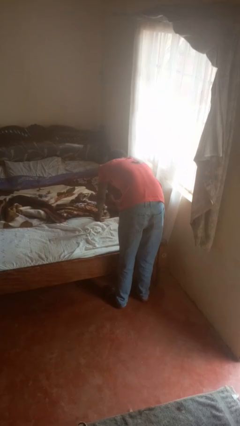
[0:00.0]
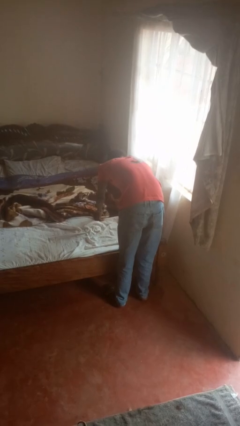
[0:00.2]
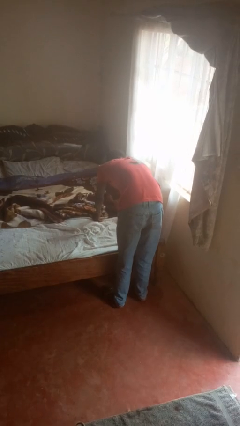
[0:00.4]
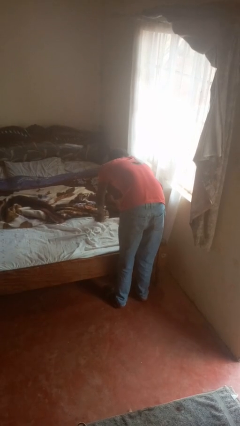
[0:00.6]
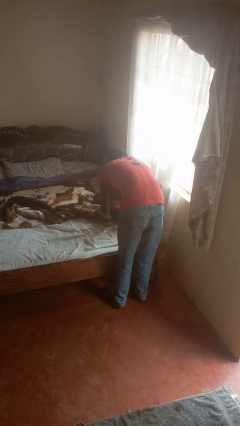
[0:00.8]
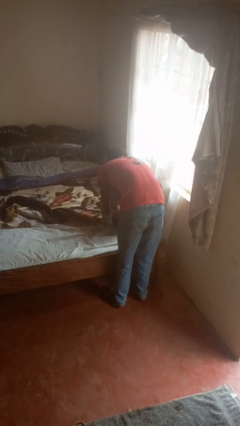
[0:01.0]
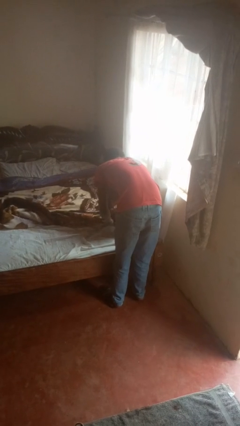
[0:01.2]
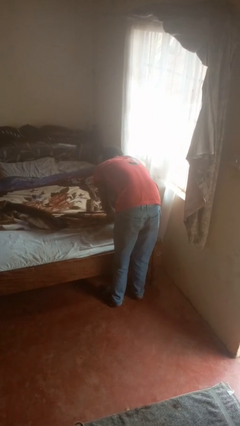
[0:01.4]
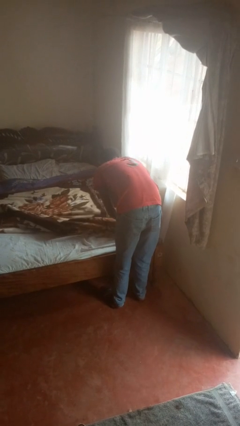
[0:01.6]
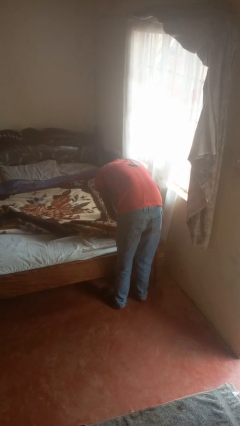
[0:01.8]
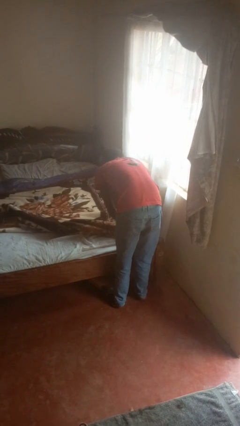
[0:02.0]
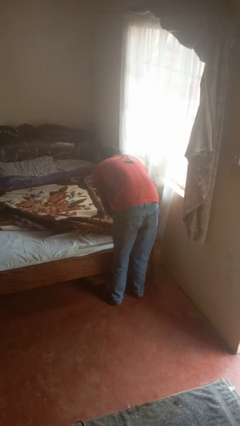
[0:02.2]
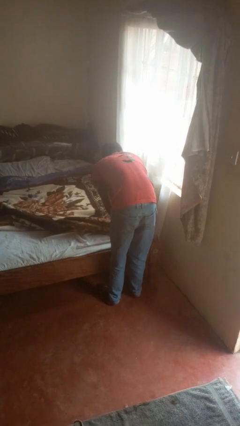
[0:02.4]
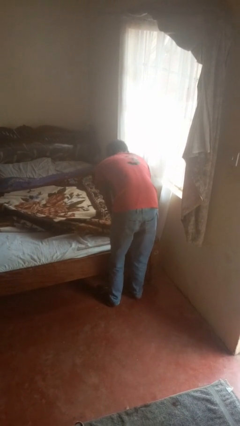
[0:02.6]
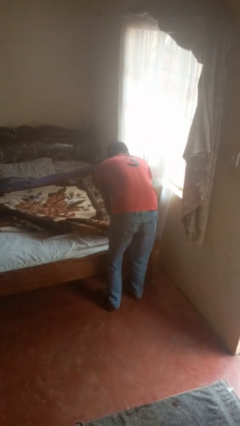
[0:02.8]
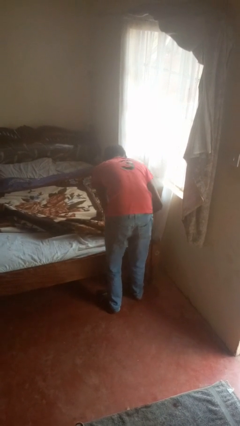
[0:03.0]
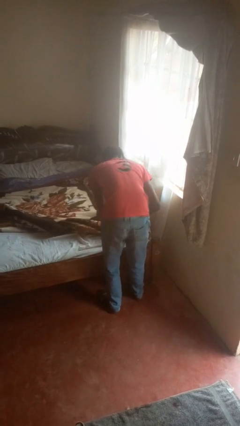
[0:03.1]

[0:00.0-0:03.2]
person makes bed

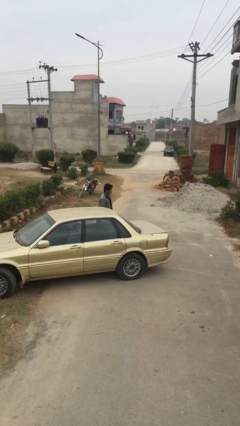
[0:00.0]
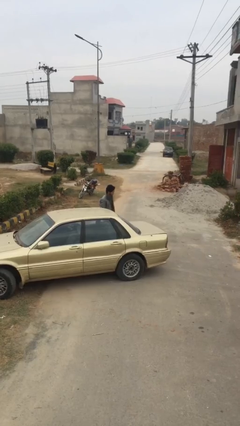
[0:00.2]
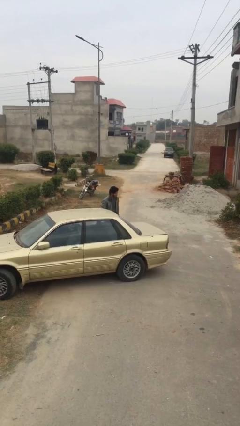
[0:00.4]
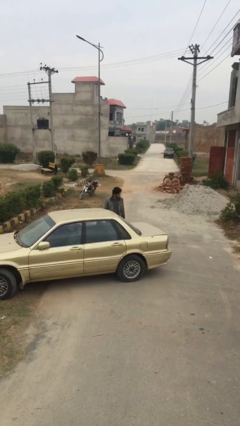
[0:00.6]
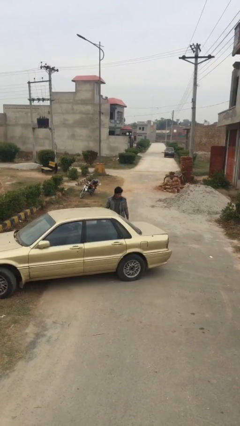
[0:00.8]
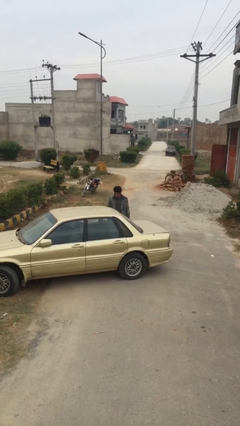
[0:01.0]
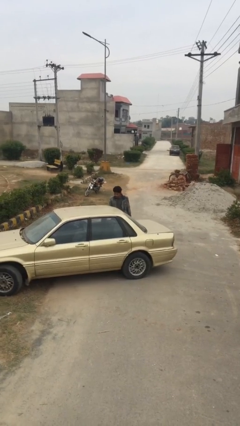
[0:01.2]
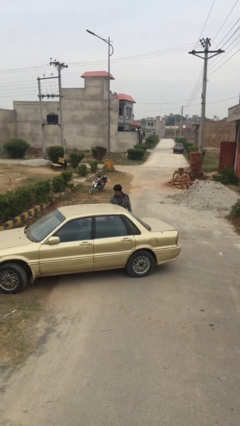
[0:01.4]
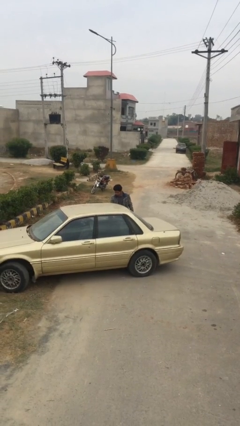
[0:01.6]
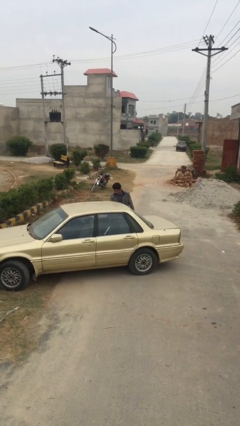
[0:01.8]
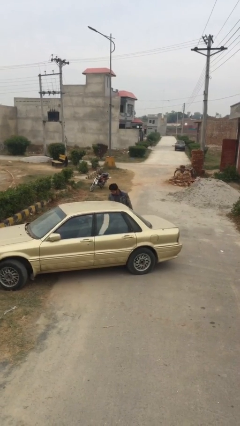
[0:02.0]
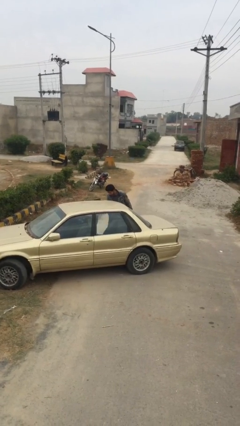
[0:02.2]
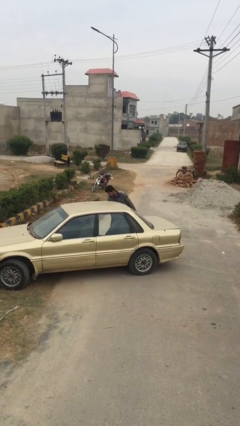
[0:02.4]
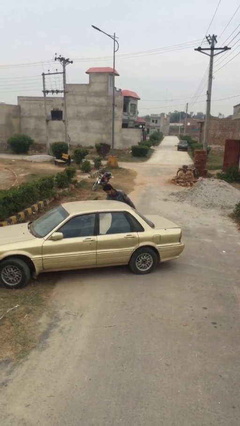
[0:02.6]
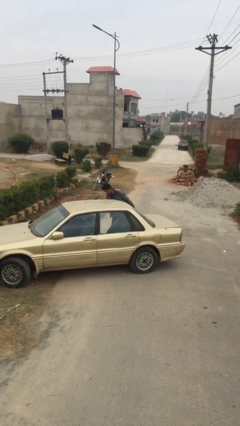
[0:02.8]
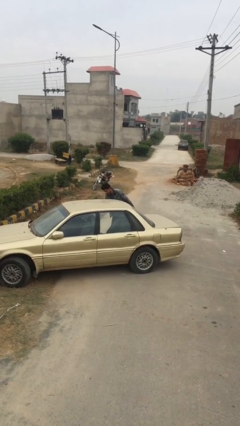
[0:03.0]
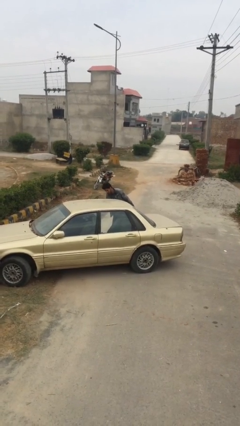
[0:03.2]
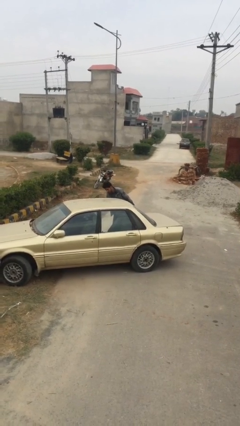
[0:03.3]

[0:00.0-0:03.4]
person opens car door

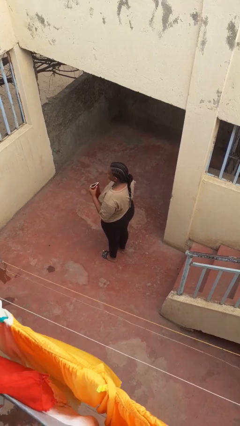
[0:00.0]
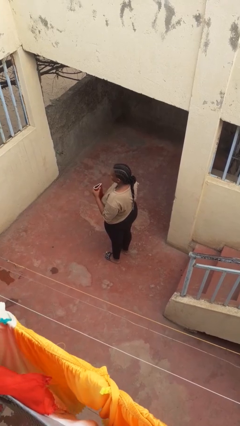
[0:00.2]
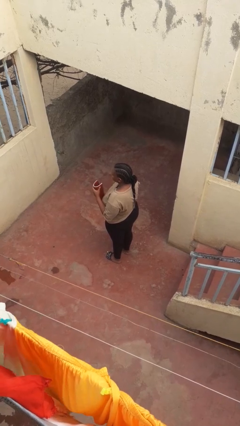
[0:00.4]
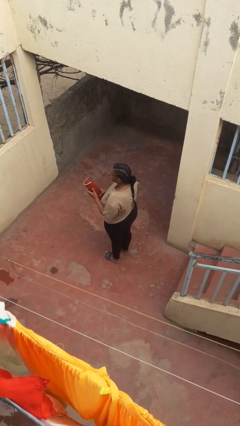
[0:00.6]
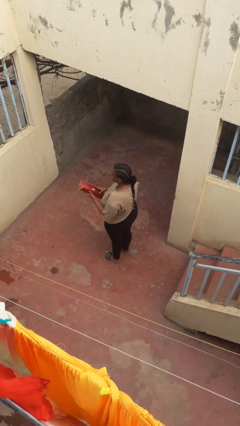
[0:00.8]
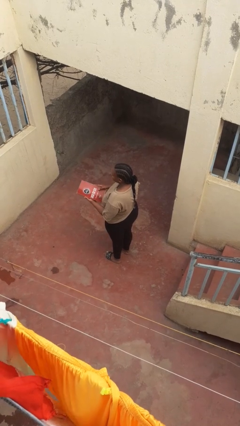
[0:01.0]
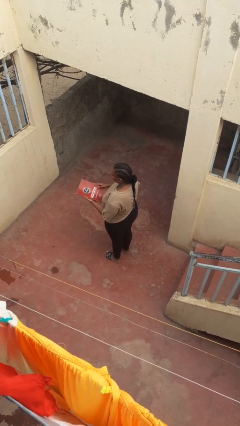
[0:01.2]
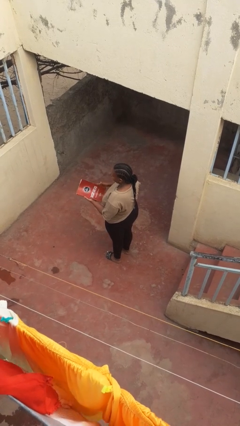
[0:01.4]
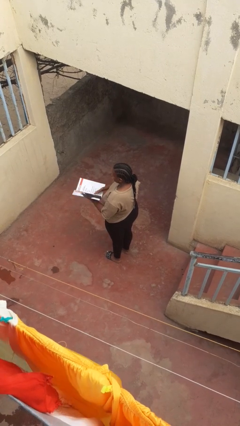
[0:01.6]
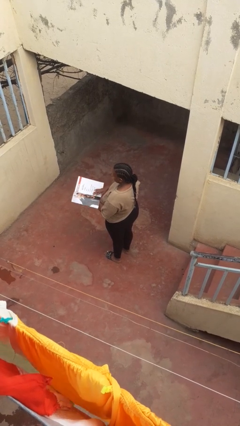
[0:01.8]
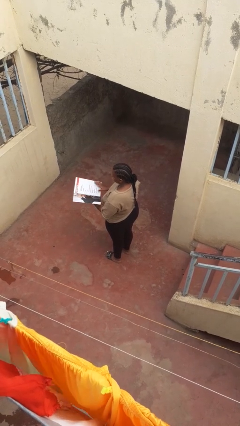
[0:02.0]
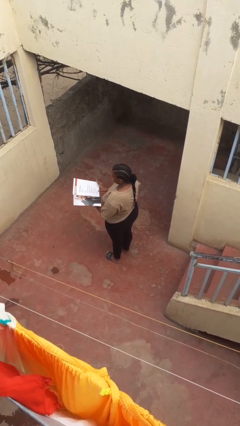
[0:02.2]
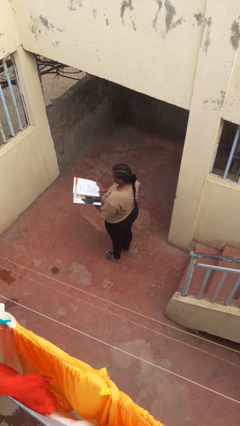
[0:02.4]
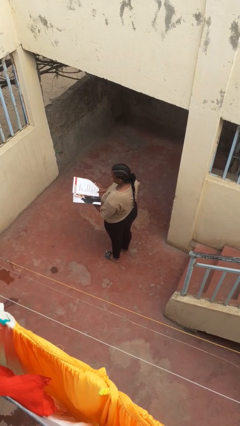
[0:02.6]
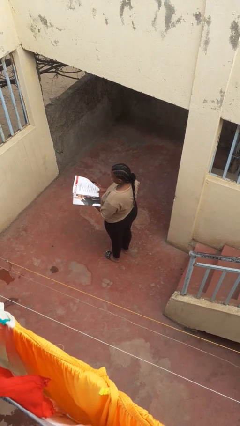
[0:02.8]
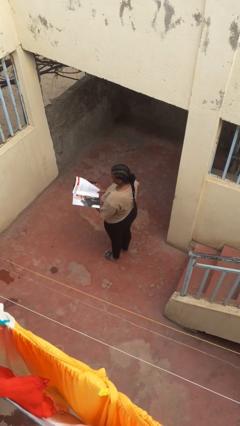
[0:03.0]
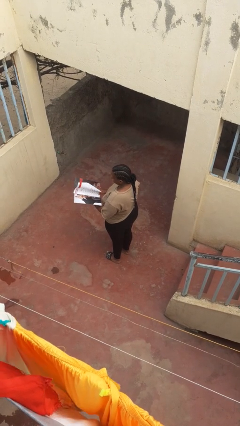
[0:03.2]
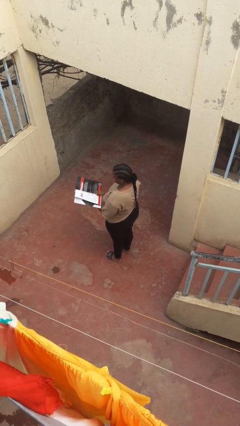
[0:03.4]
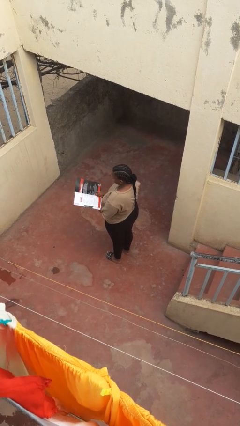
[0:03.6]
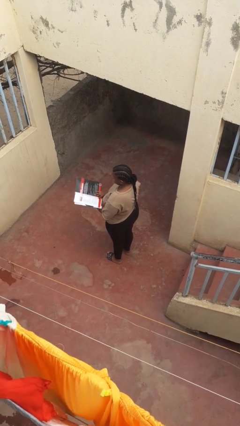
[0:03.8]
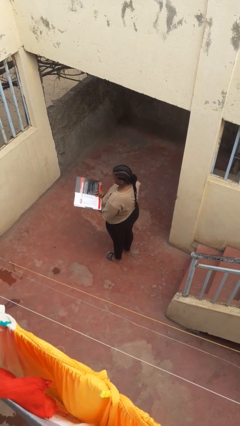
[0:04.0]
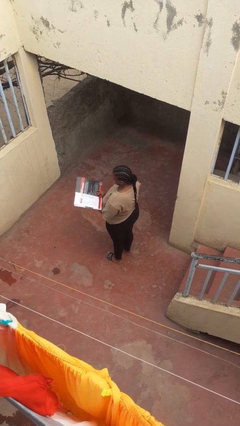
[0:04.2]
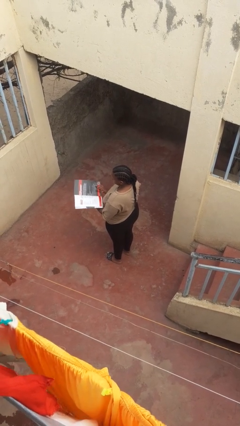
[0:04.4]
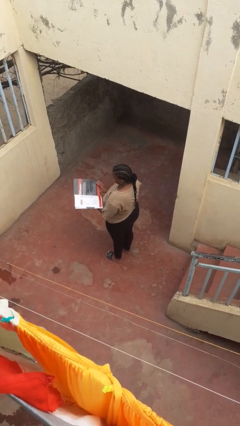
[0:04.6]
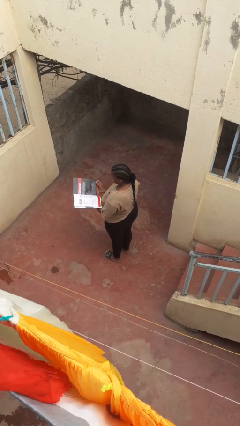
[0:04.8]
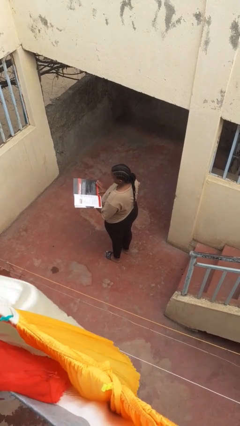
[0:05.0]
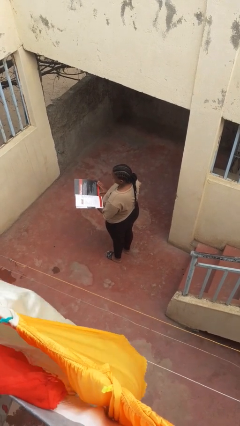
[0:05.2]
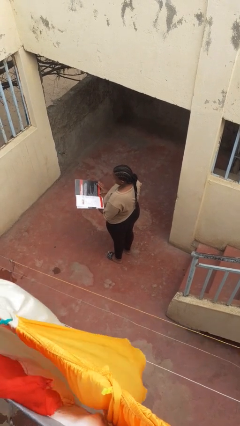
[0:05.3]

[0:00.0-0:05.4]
person reads magazine

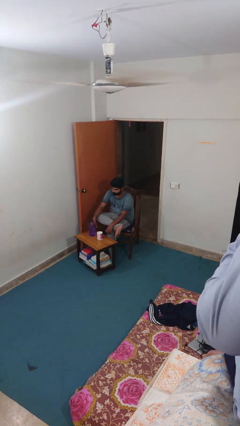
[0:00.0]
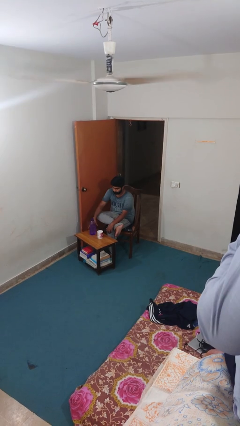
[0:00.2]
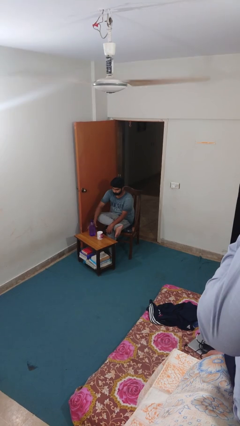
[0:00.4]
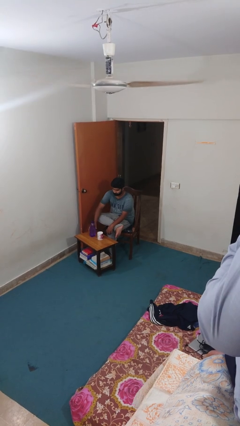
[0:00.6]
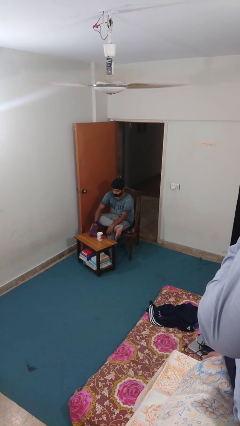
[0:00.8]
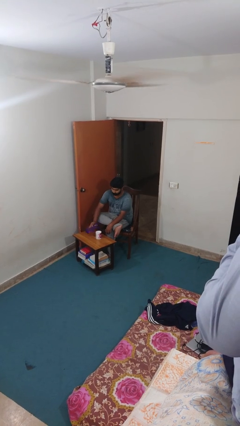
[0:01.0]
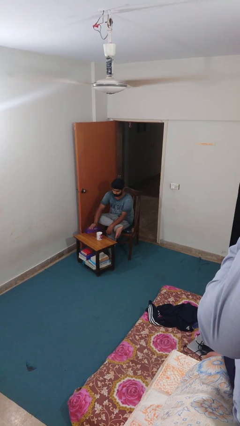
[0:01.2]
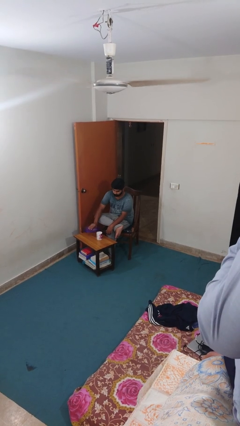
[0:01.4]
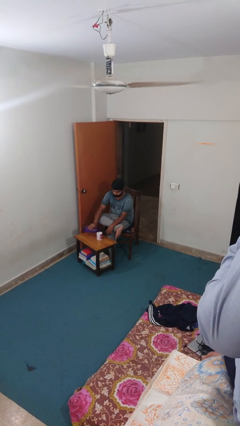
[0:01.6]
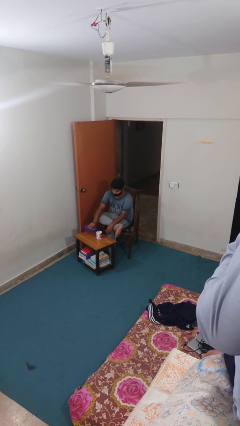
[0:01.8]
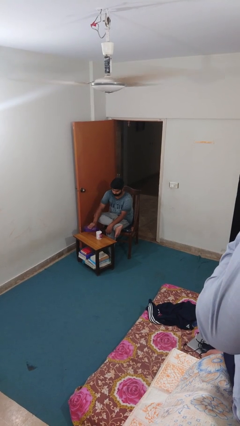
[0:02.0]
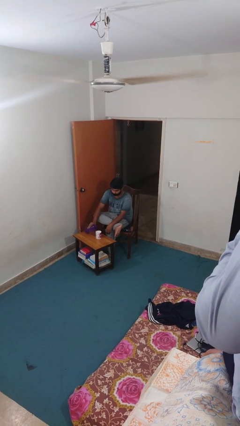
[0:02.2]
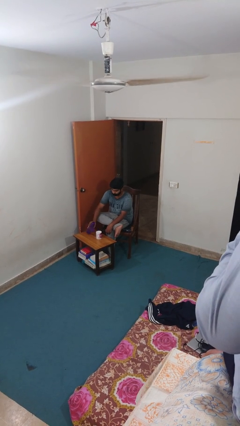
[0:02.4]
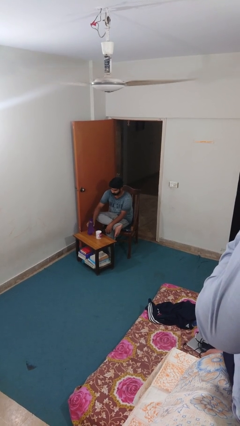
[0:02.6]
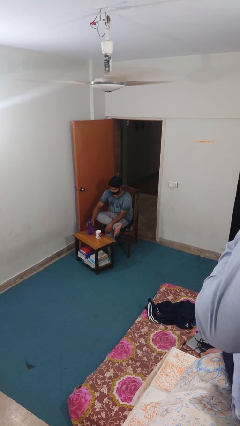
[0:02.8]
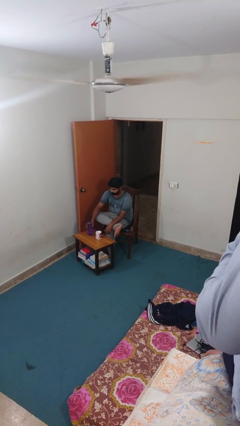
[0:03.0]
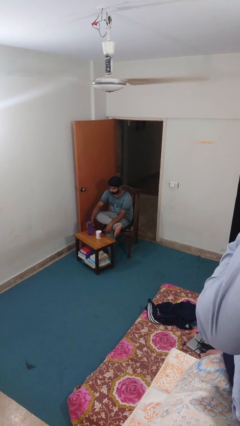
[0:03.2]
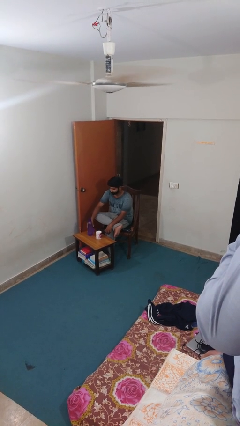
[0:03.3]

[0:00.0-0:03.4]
person pours liquid into cup

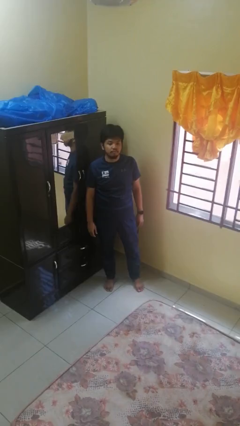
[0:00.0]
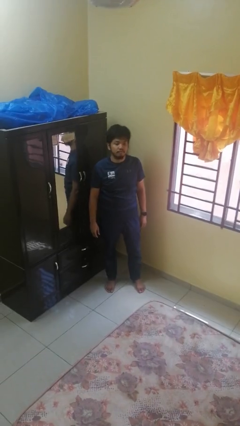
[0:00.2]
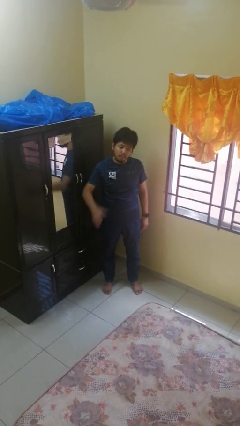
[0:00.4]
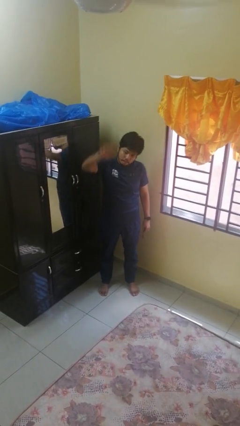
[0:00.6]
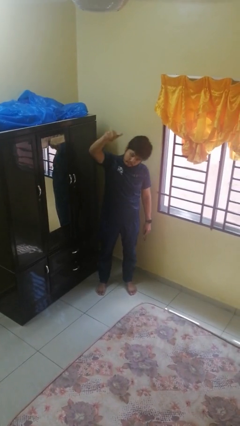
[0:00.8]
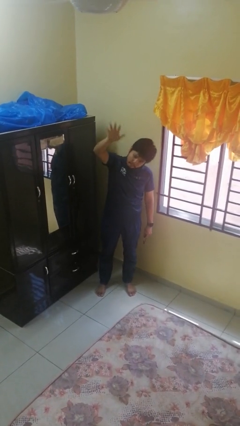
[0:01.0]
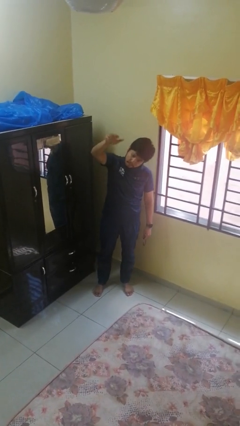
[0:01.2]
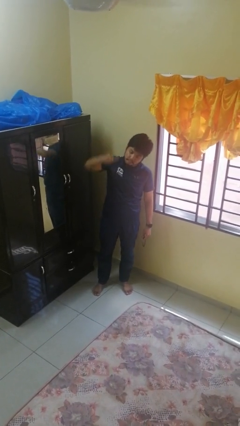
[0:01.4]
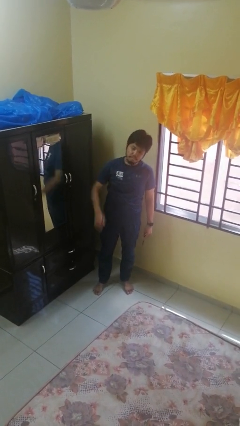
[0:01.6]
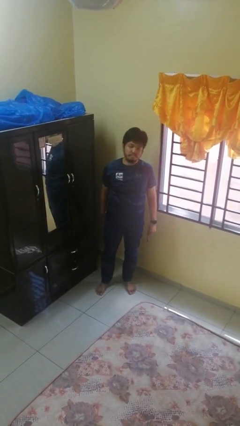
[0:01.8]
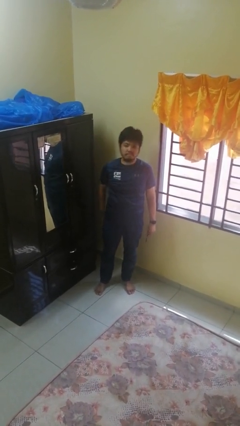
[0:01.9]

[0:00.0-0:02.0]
person gestures come here

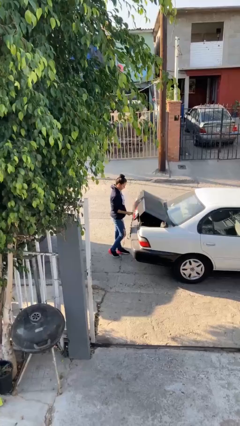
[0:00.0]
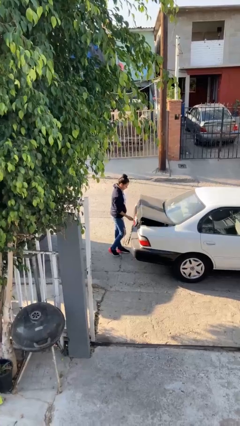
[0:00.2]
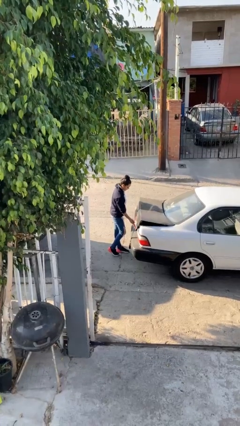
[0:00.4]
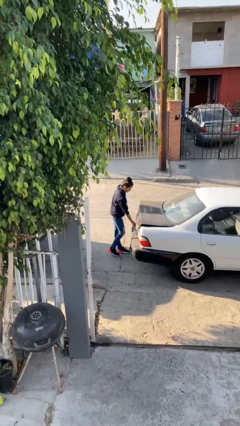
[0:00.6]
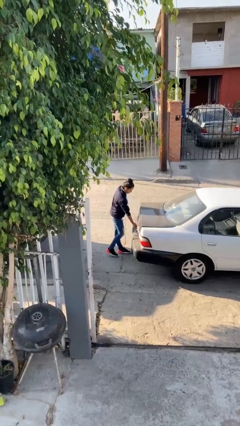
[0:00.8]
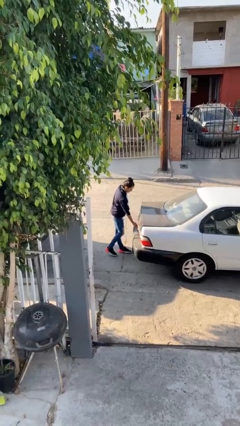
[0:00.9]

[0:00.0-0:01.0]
person closes car trunk
